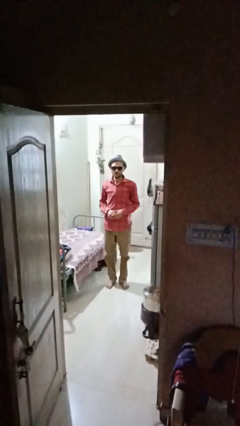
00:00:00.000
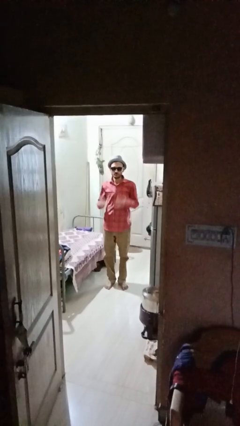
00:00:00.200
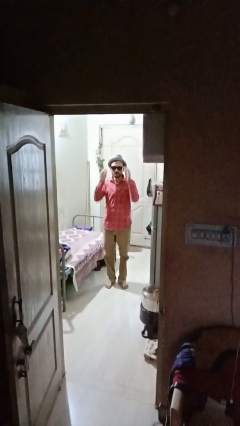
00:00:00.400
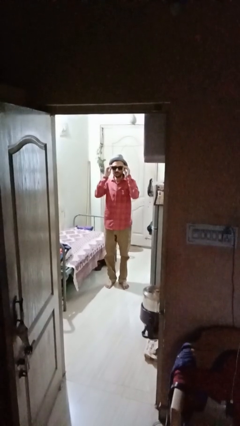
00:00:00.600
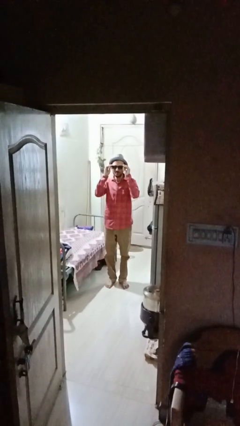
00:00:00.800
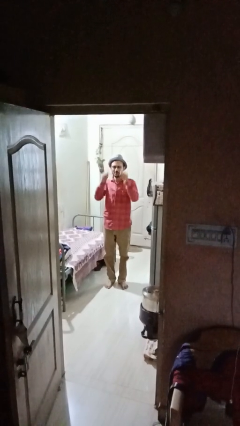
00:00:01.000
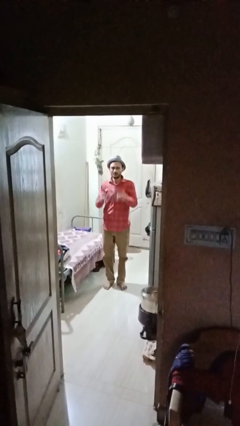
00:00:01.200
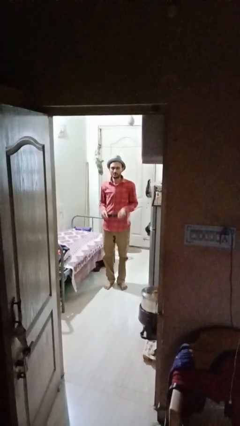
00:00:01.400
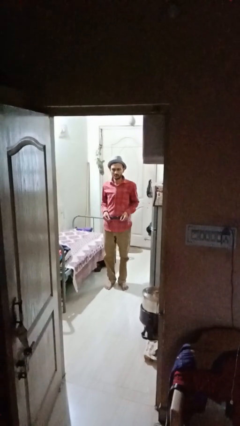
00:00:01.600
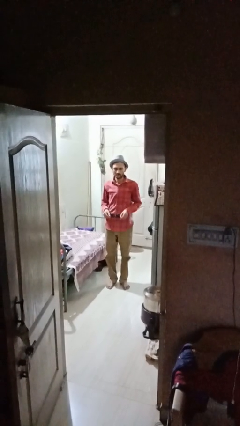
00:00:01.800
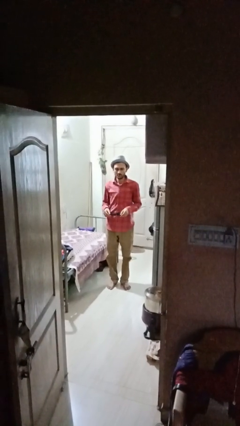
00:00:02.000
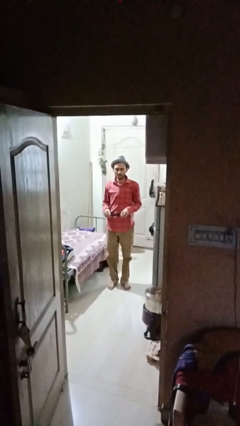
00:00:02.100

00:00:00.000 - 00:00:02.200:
person takes off sunglasses

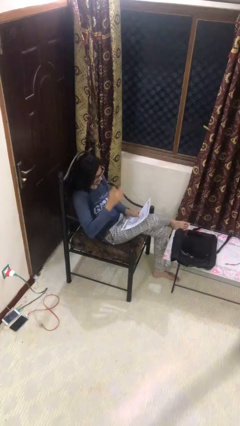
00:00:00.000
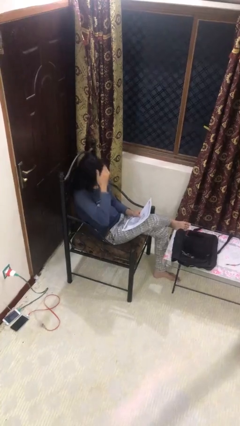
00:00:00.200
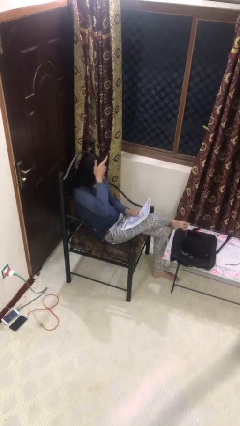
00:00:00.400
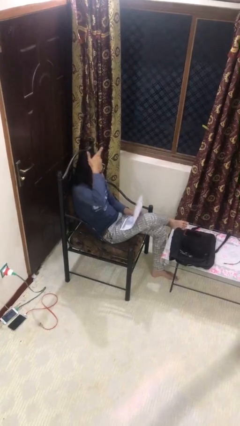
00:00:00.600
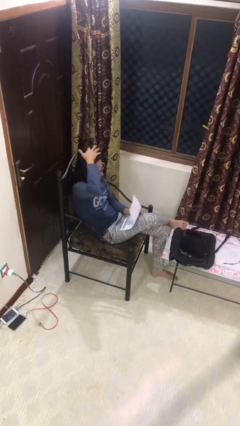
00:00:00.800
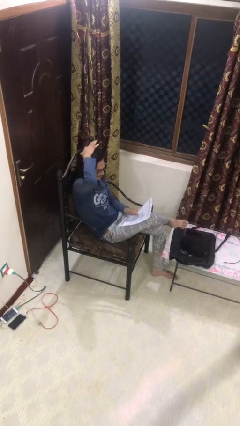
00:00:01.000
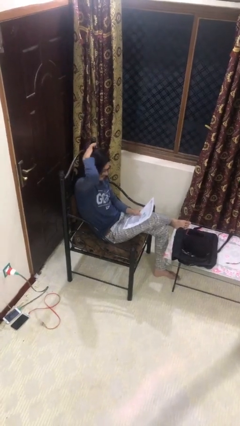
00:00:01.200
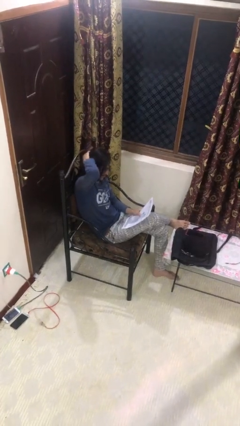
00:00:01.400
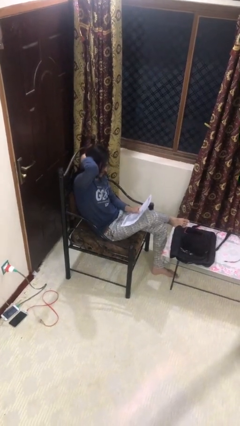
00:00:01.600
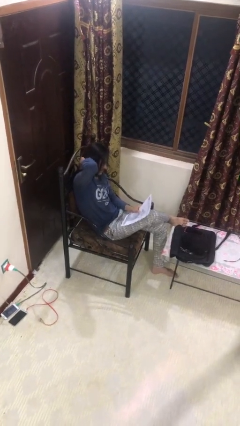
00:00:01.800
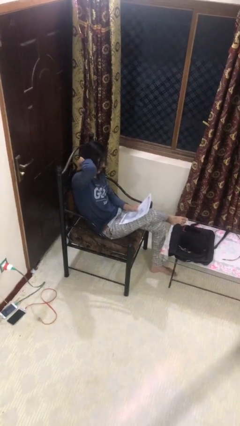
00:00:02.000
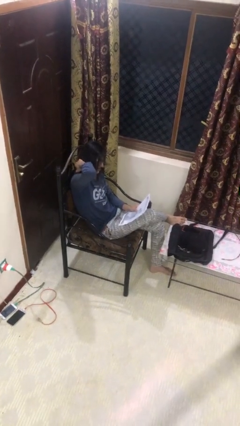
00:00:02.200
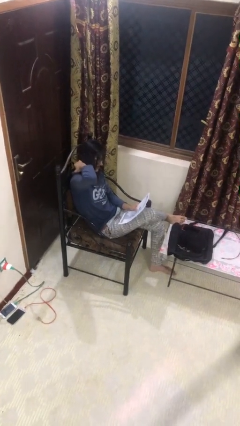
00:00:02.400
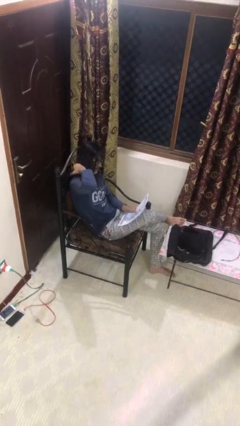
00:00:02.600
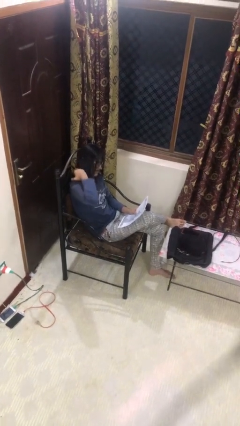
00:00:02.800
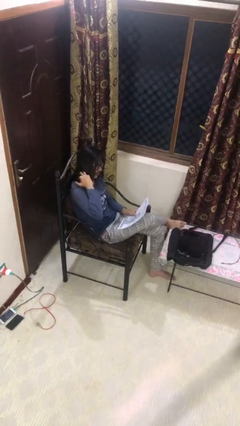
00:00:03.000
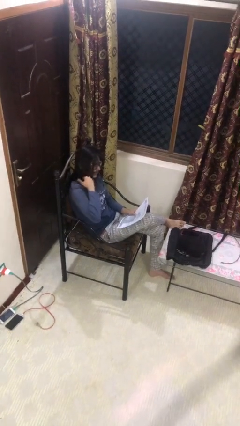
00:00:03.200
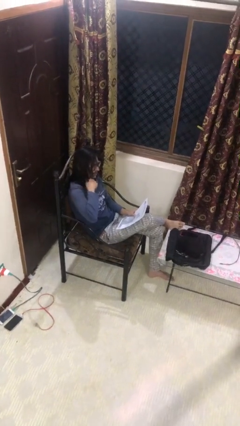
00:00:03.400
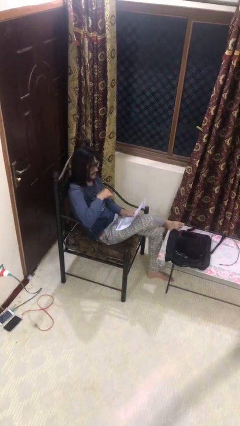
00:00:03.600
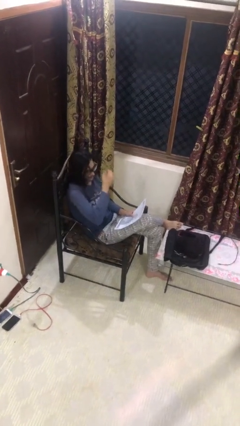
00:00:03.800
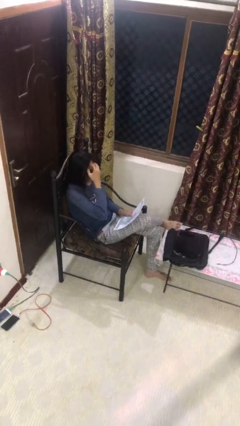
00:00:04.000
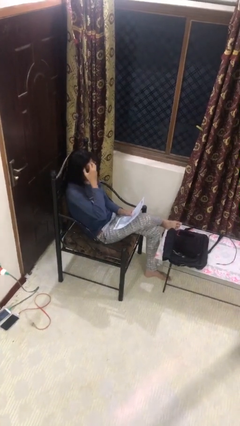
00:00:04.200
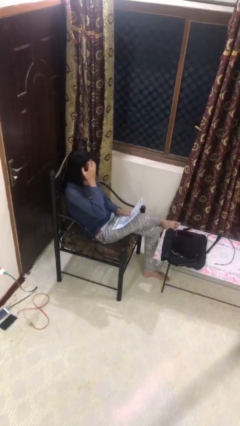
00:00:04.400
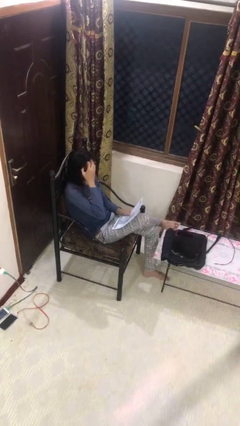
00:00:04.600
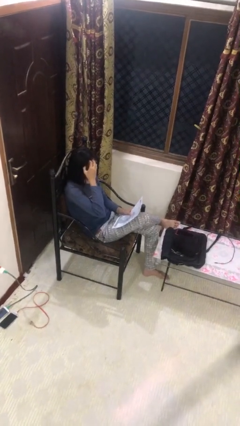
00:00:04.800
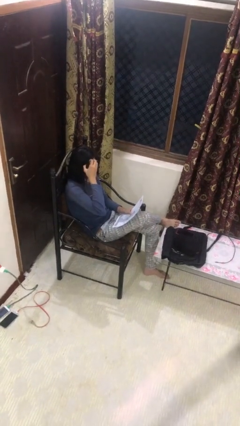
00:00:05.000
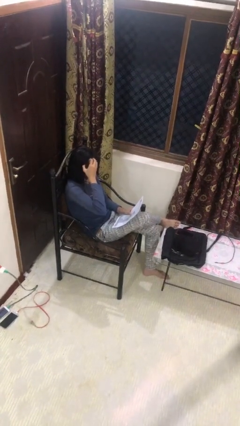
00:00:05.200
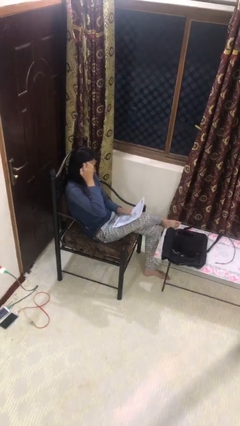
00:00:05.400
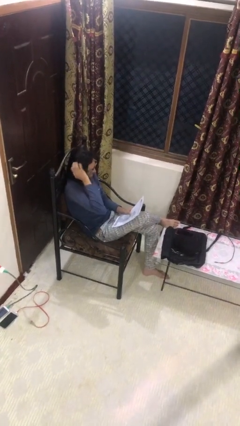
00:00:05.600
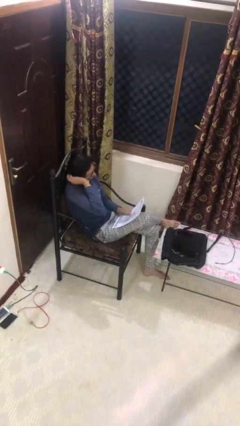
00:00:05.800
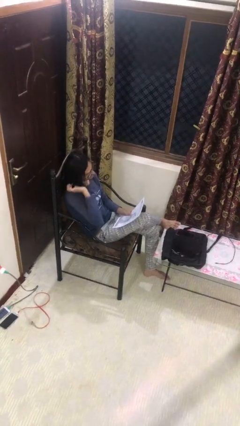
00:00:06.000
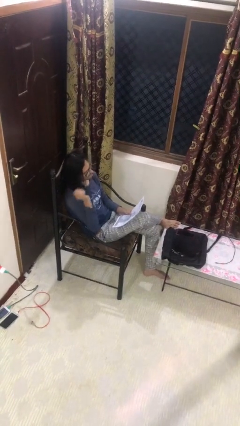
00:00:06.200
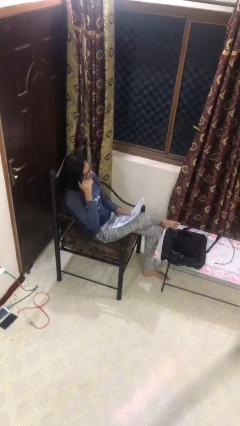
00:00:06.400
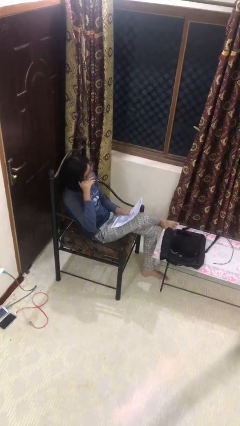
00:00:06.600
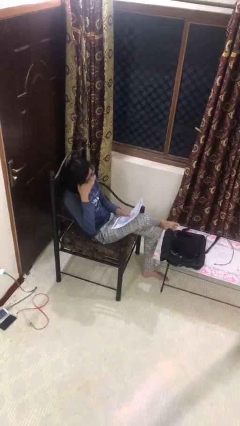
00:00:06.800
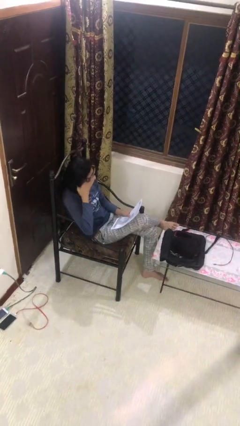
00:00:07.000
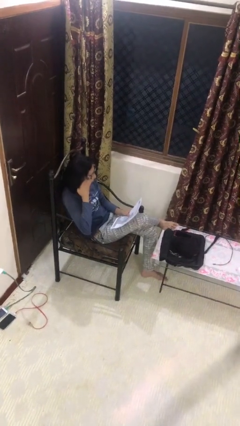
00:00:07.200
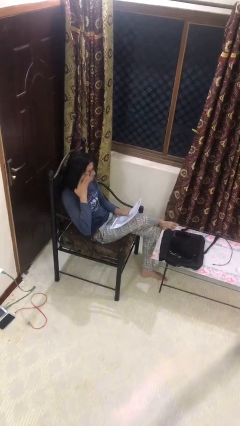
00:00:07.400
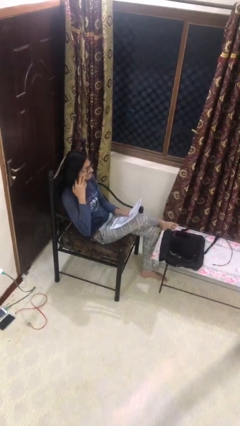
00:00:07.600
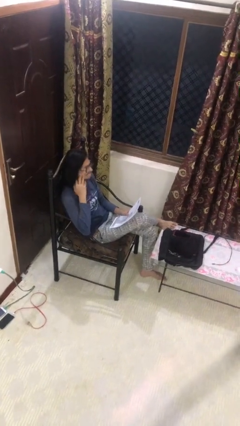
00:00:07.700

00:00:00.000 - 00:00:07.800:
person reads document

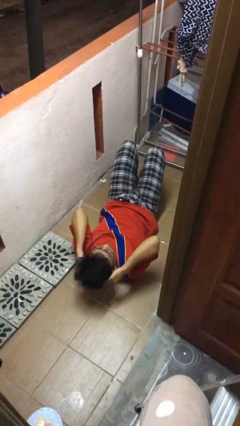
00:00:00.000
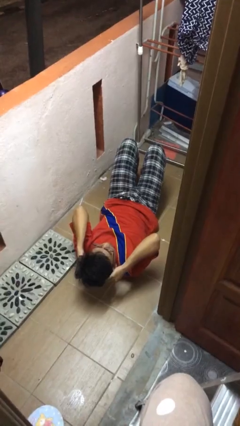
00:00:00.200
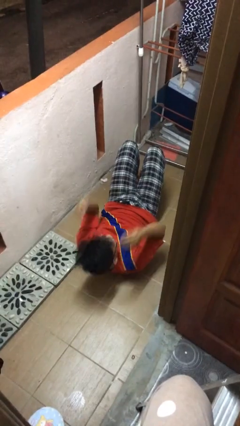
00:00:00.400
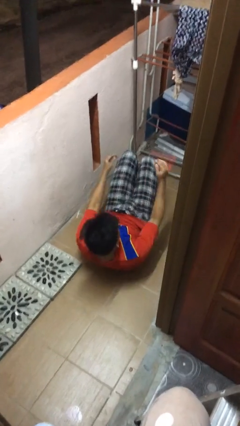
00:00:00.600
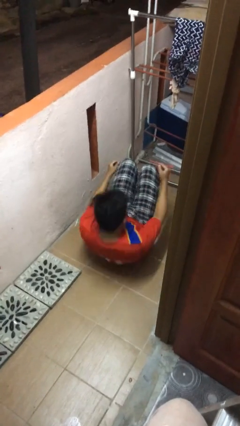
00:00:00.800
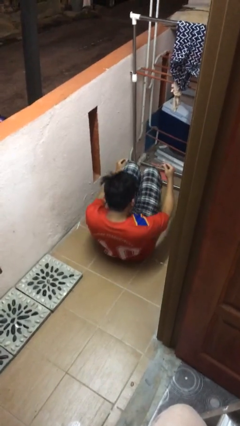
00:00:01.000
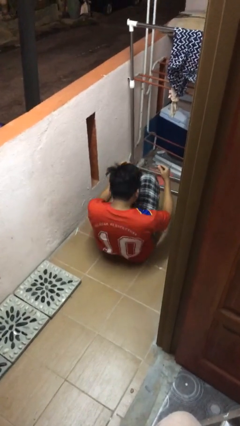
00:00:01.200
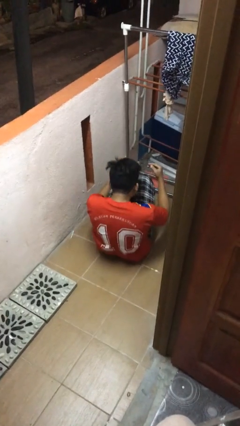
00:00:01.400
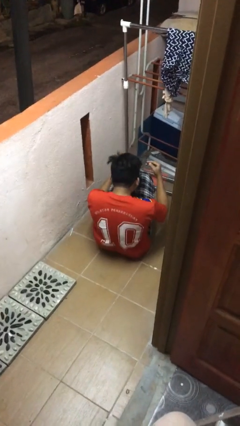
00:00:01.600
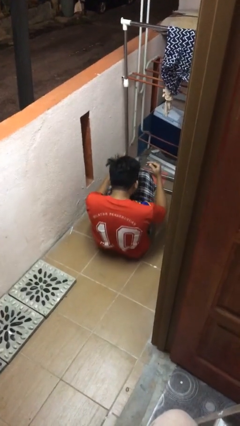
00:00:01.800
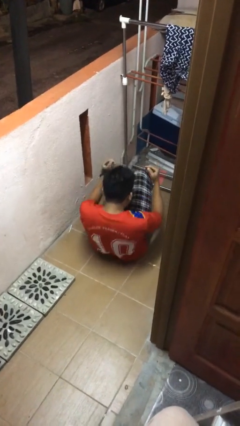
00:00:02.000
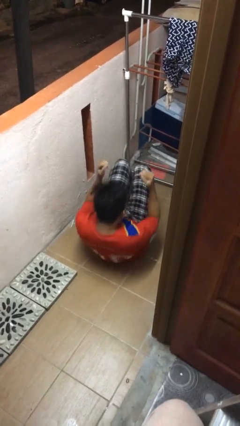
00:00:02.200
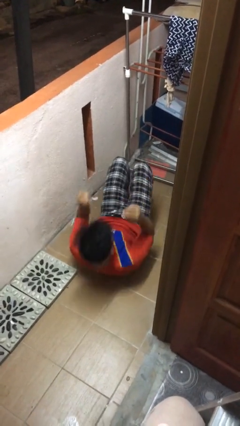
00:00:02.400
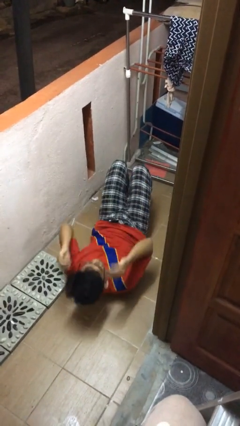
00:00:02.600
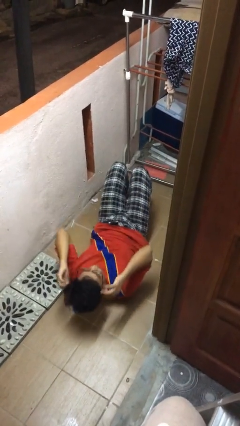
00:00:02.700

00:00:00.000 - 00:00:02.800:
person exercises with situp

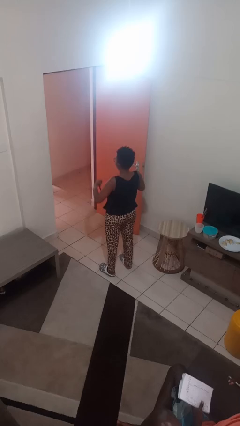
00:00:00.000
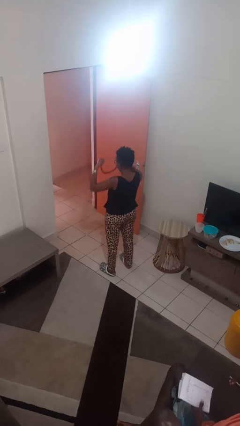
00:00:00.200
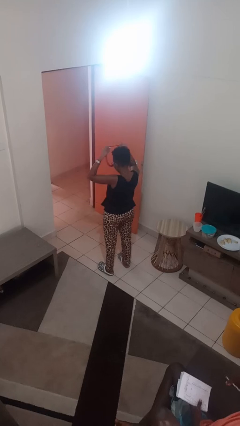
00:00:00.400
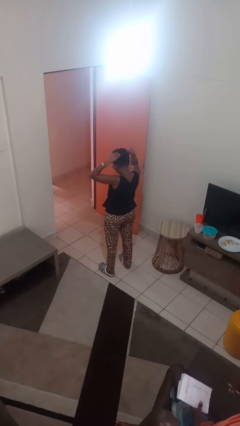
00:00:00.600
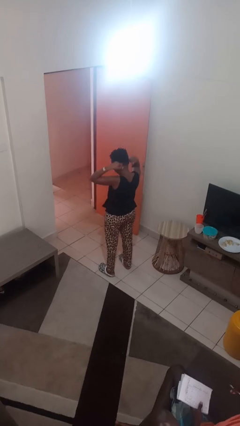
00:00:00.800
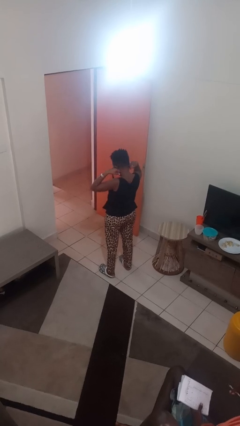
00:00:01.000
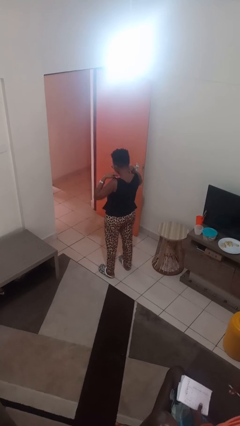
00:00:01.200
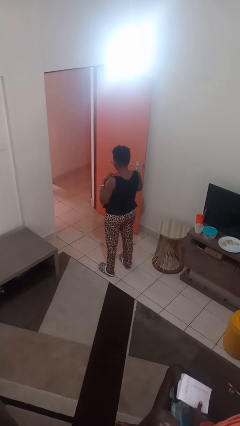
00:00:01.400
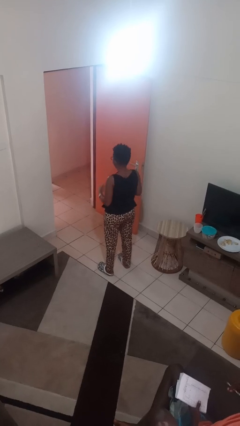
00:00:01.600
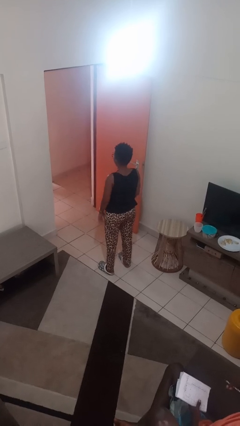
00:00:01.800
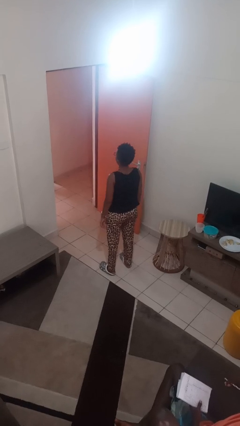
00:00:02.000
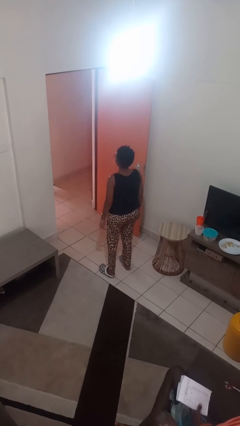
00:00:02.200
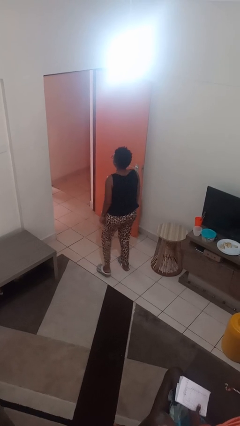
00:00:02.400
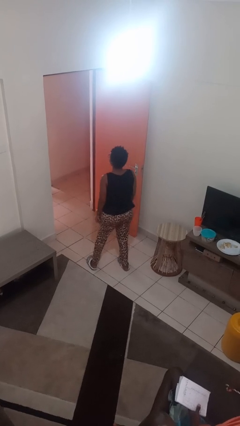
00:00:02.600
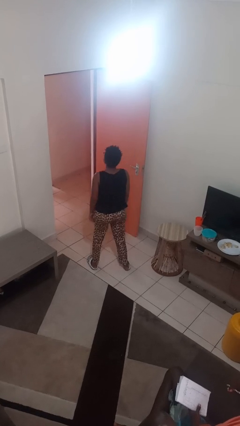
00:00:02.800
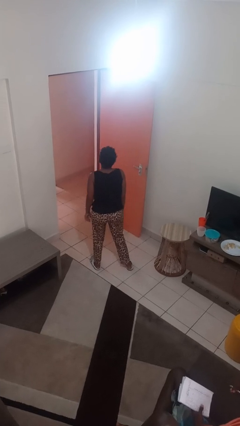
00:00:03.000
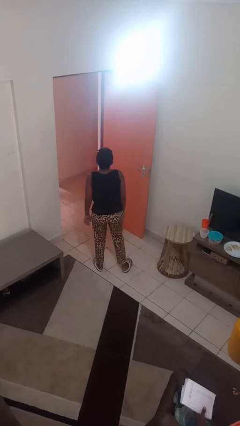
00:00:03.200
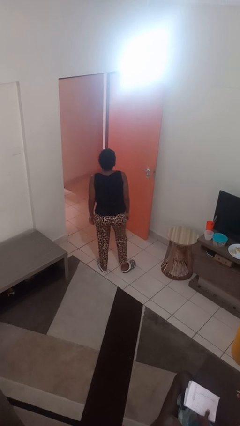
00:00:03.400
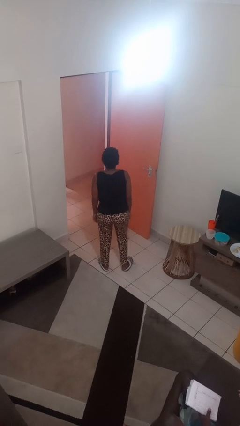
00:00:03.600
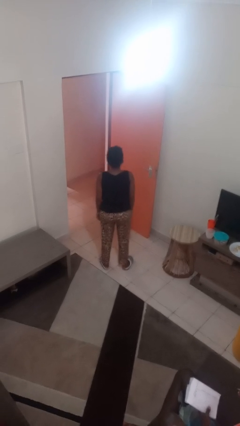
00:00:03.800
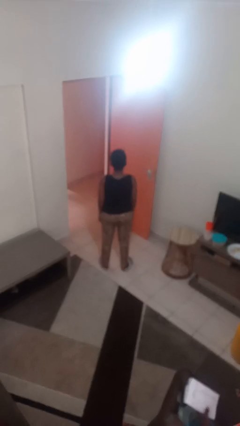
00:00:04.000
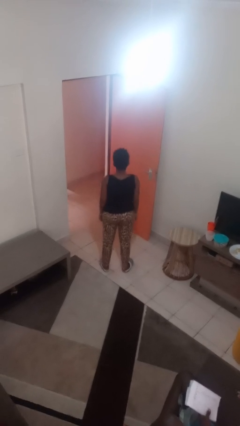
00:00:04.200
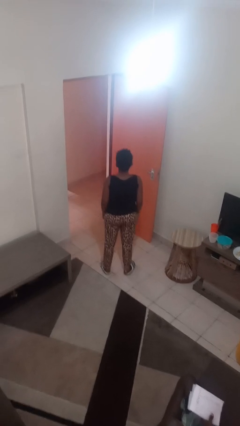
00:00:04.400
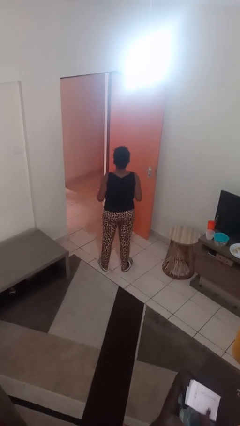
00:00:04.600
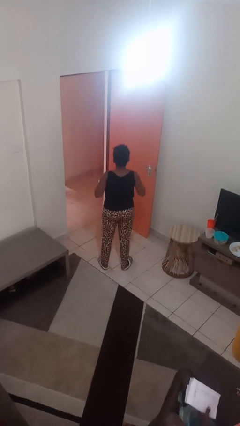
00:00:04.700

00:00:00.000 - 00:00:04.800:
person puts on necklace
